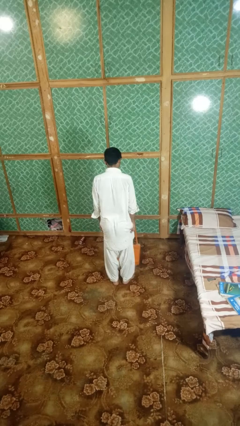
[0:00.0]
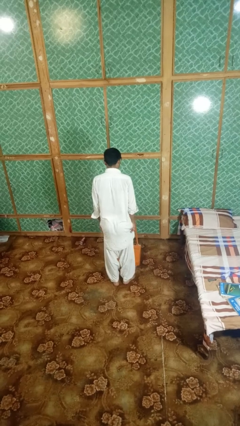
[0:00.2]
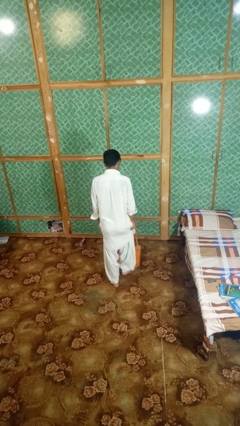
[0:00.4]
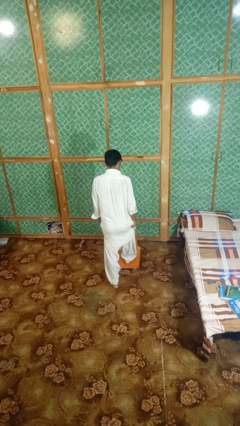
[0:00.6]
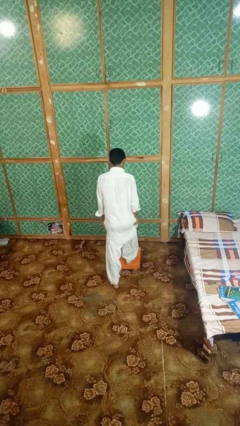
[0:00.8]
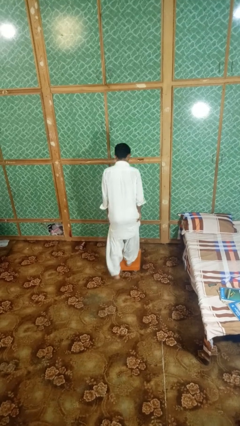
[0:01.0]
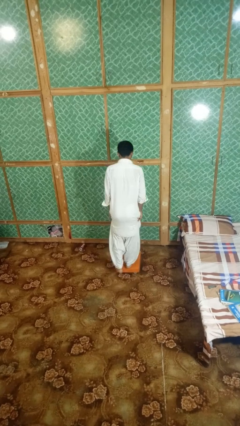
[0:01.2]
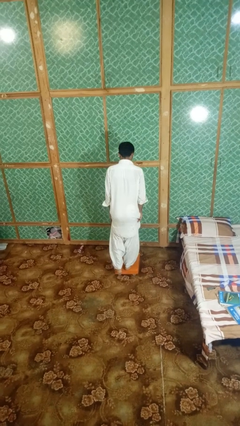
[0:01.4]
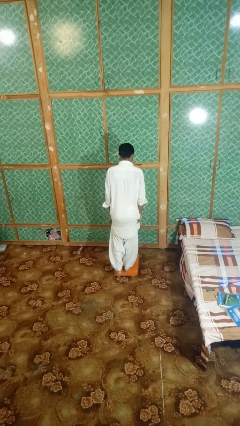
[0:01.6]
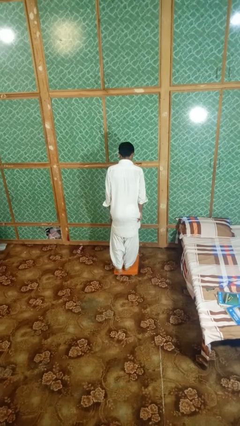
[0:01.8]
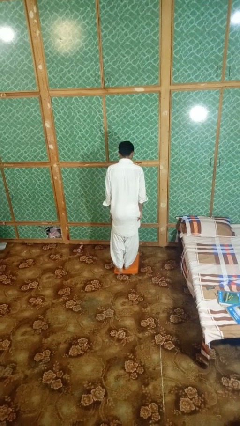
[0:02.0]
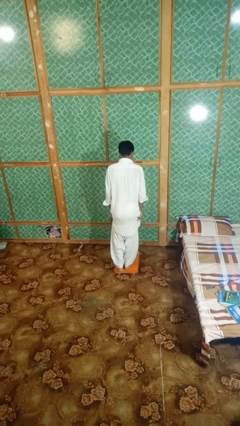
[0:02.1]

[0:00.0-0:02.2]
person uses bodyweight scale

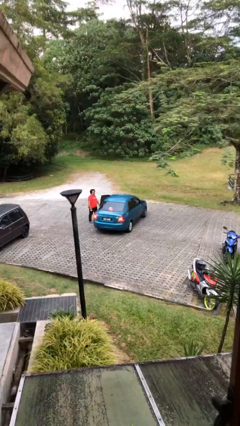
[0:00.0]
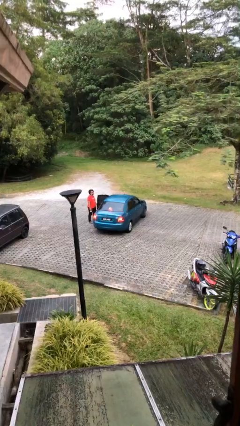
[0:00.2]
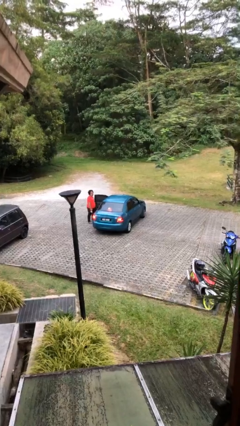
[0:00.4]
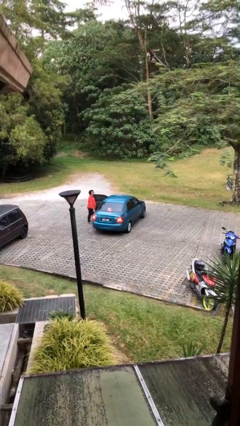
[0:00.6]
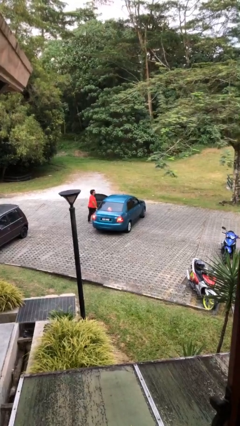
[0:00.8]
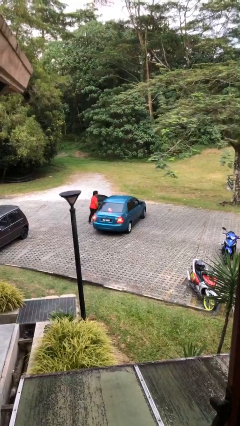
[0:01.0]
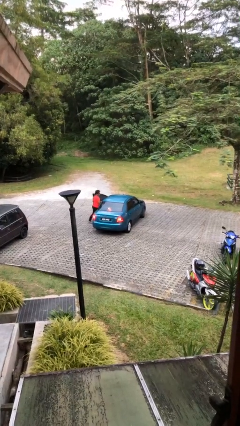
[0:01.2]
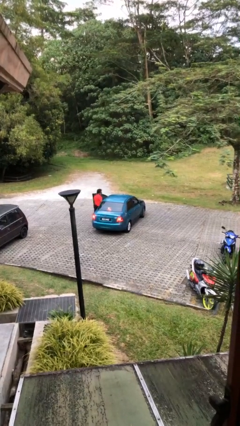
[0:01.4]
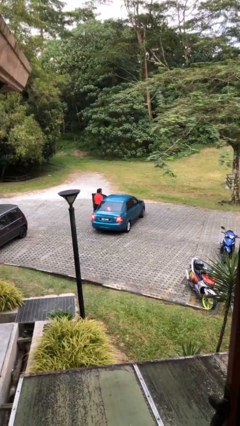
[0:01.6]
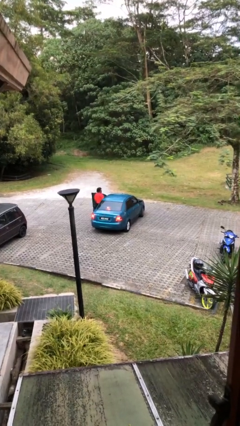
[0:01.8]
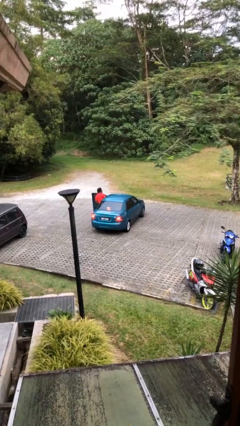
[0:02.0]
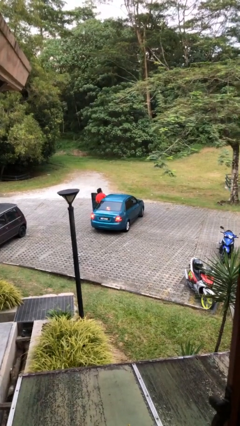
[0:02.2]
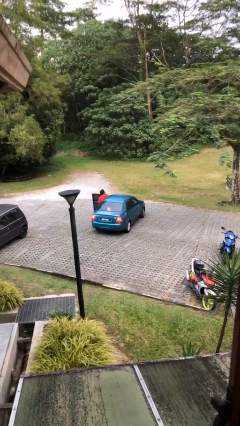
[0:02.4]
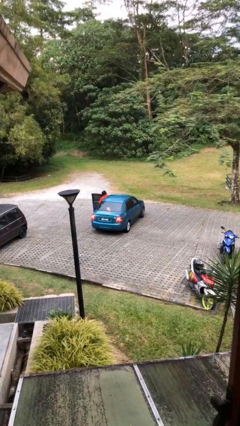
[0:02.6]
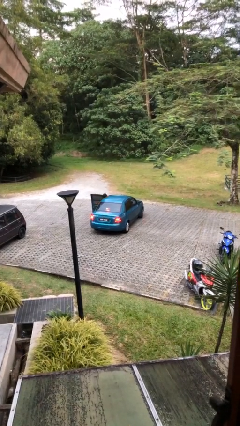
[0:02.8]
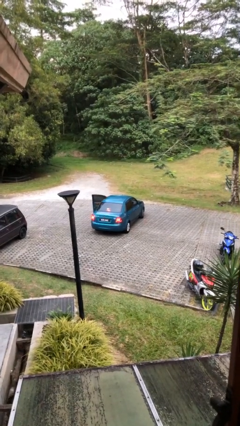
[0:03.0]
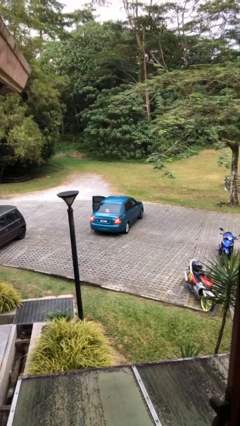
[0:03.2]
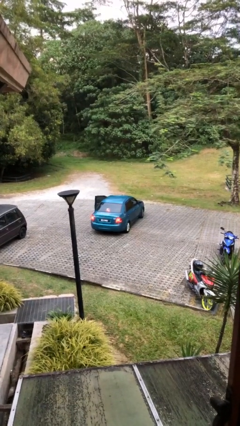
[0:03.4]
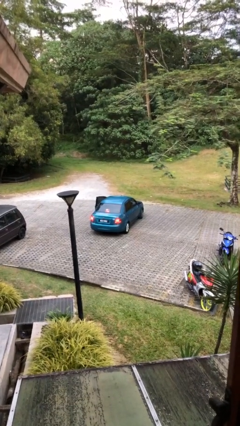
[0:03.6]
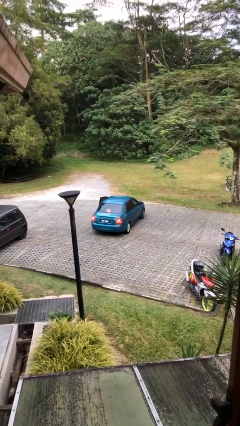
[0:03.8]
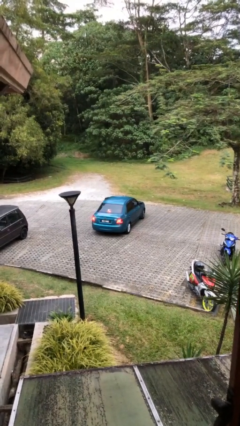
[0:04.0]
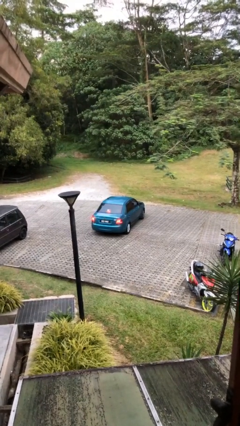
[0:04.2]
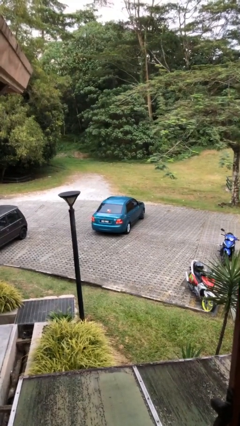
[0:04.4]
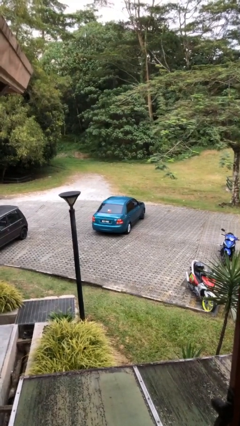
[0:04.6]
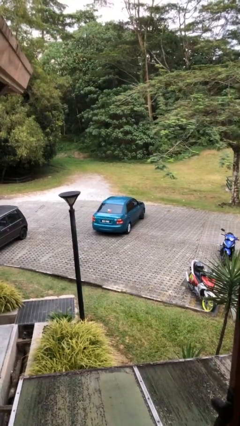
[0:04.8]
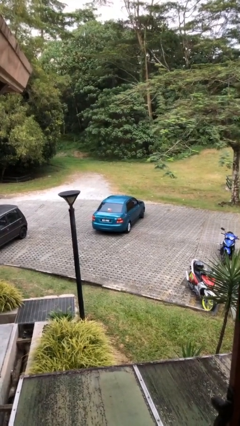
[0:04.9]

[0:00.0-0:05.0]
car picks up person

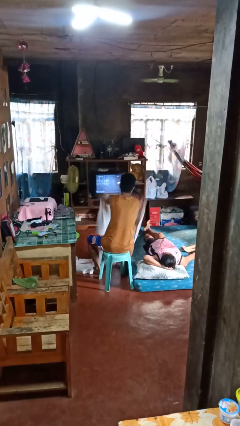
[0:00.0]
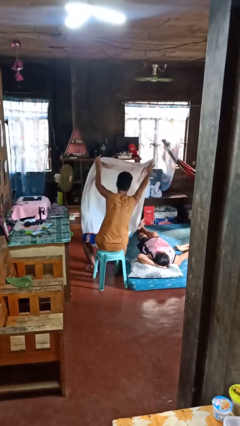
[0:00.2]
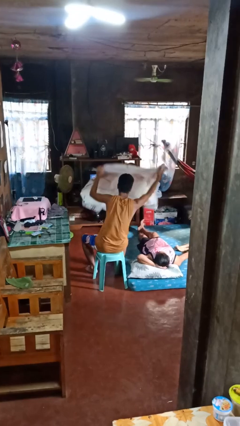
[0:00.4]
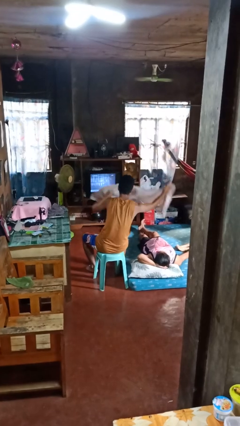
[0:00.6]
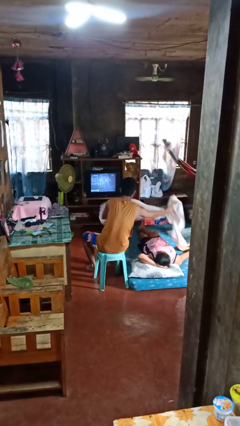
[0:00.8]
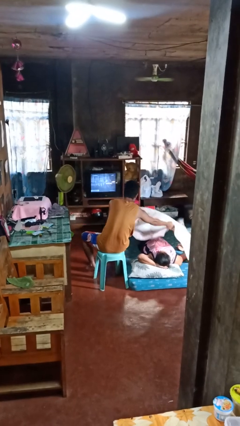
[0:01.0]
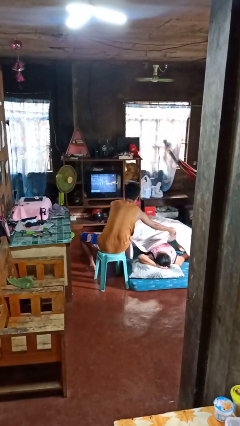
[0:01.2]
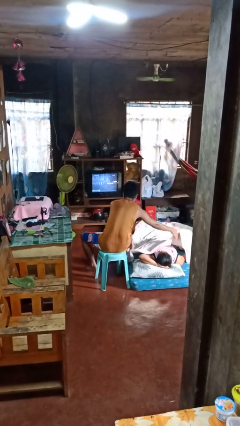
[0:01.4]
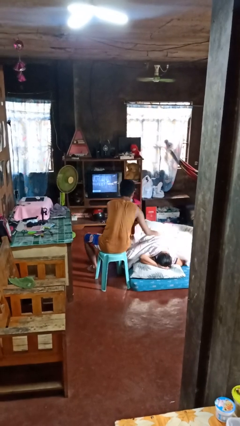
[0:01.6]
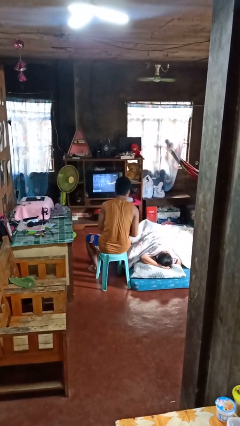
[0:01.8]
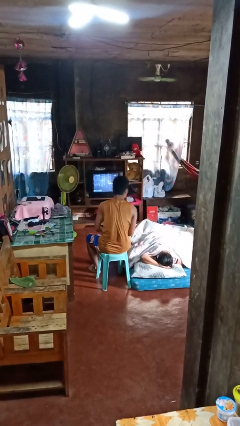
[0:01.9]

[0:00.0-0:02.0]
person covers friend with blanket

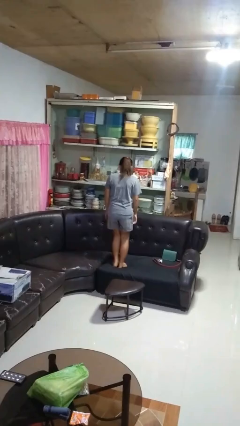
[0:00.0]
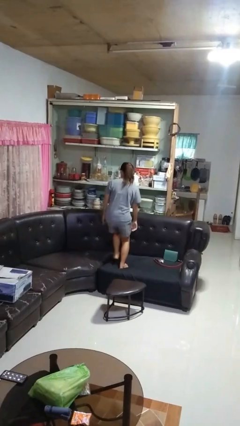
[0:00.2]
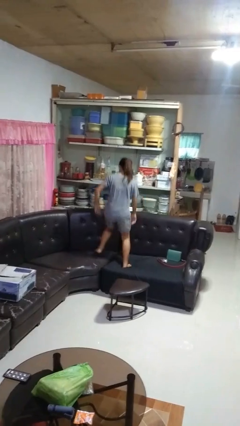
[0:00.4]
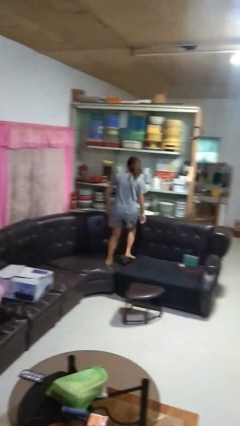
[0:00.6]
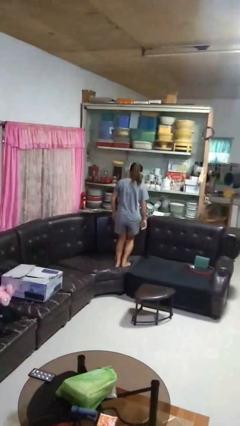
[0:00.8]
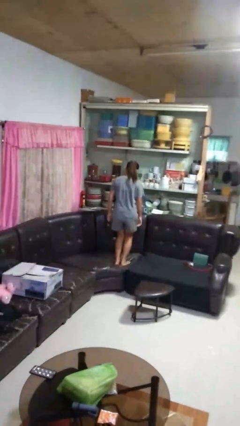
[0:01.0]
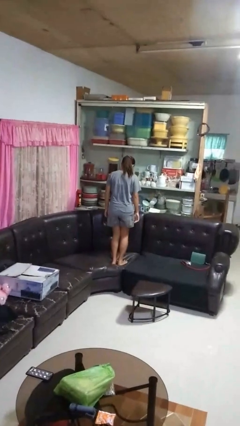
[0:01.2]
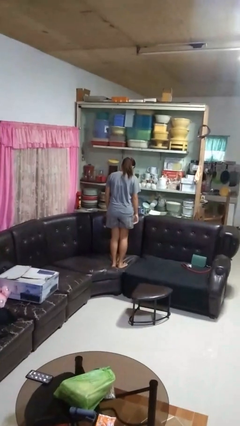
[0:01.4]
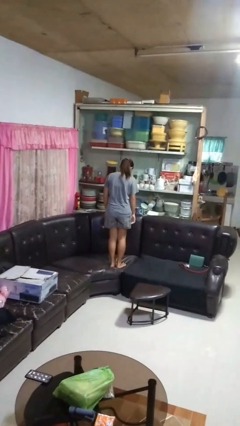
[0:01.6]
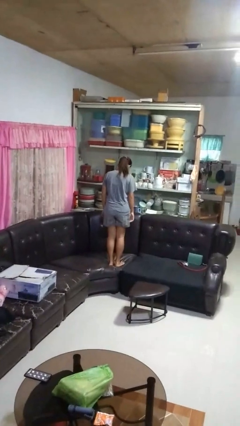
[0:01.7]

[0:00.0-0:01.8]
person jumps on couch

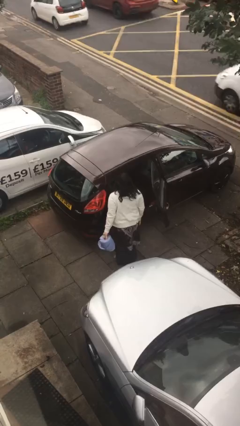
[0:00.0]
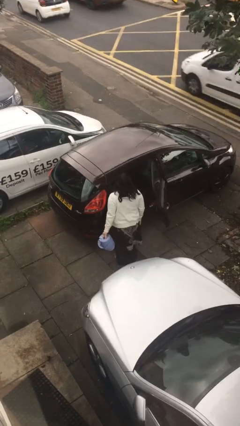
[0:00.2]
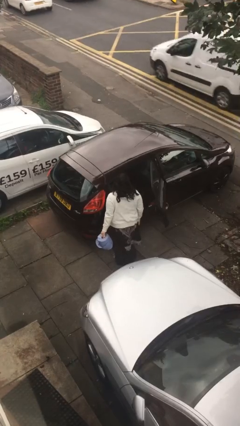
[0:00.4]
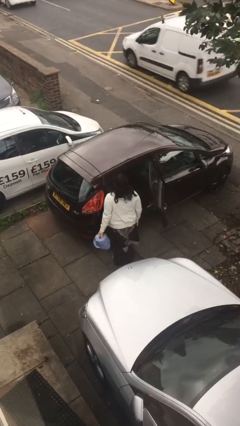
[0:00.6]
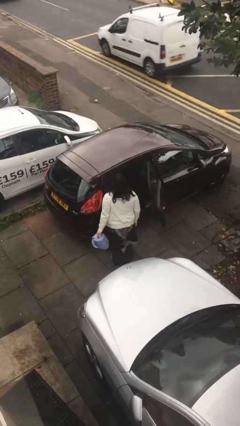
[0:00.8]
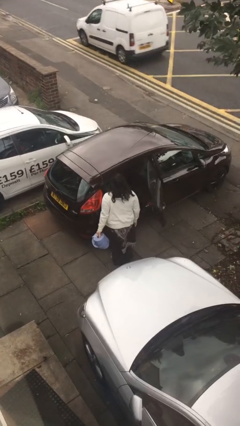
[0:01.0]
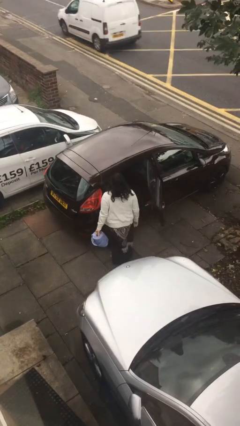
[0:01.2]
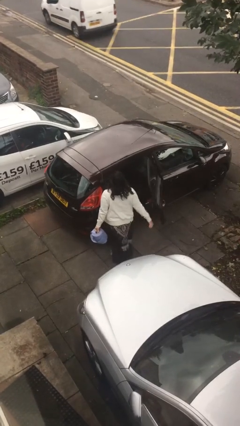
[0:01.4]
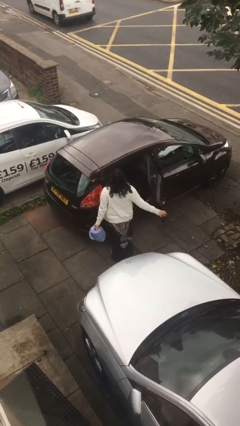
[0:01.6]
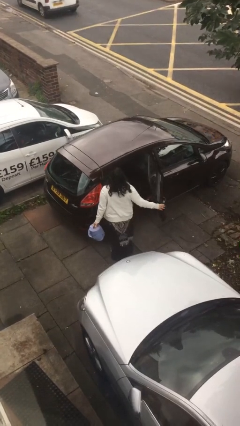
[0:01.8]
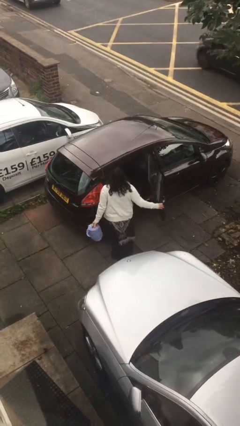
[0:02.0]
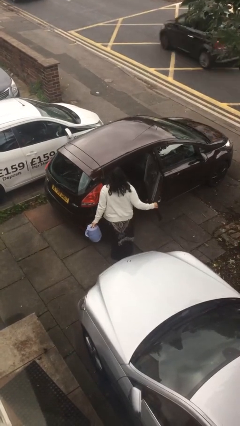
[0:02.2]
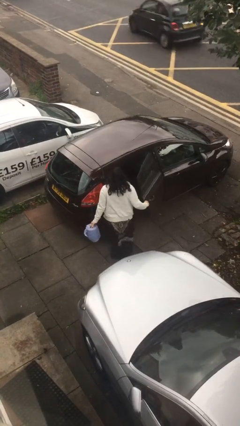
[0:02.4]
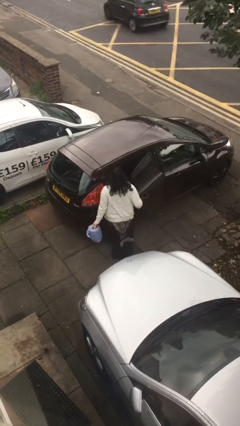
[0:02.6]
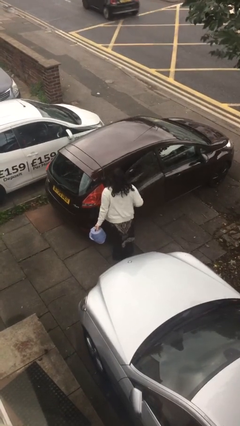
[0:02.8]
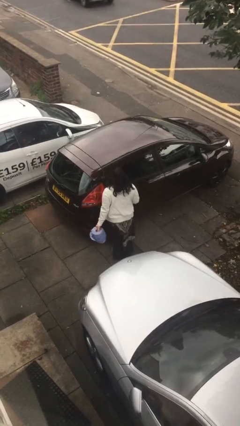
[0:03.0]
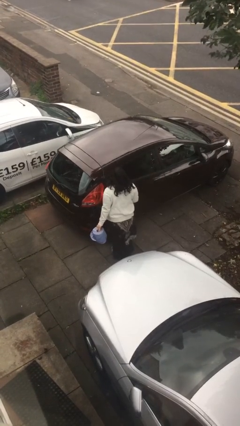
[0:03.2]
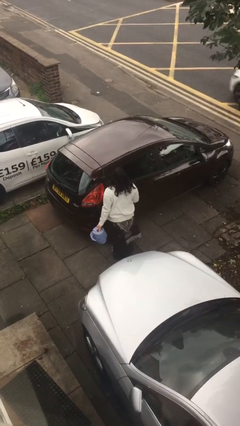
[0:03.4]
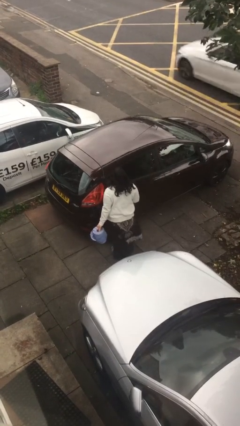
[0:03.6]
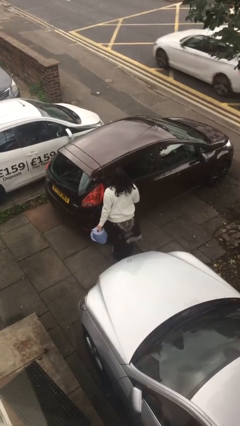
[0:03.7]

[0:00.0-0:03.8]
person closes car door

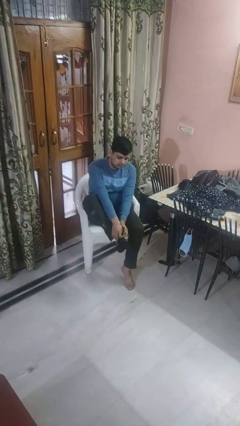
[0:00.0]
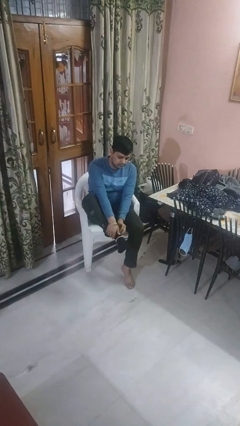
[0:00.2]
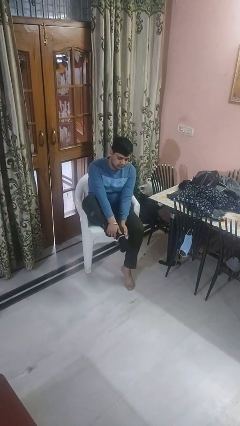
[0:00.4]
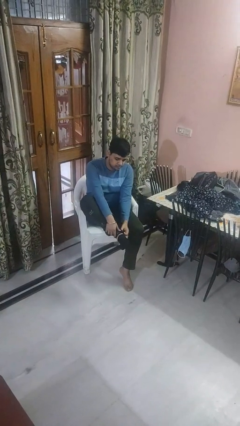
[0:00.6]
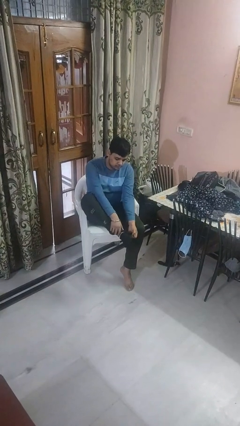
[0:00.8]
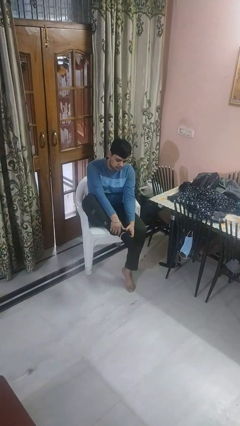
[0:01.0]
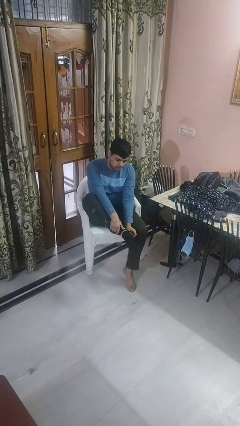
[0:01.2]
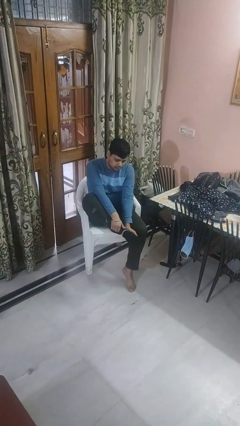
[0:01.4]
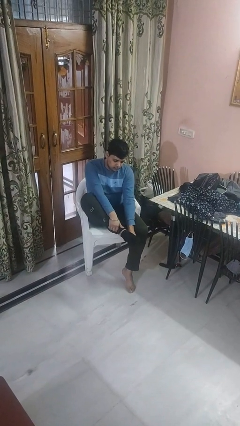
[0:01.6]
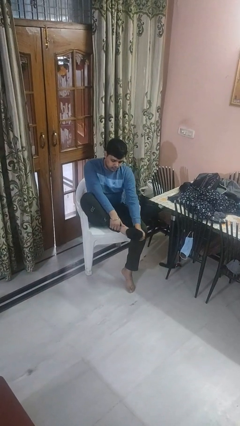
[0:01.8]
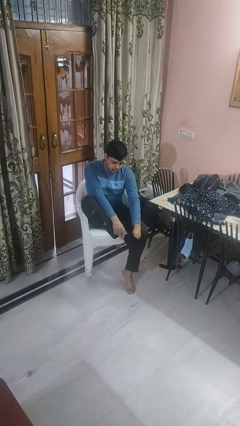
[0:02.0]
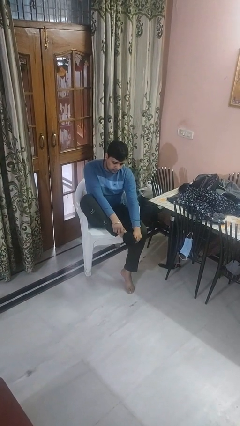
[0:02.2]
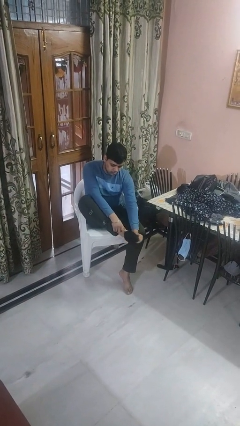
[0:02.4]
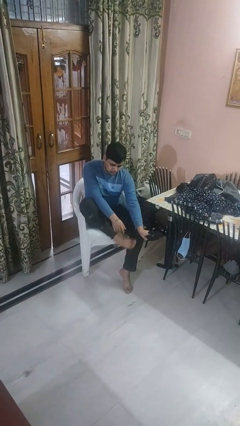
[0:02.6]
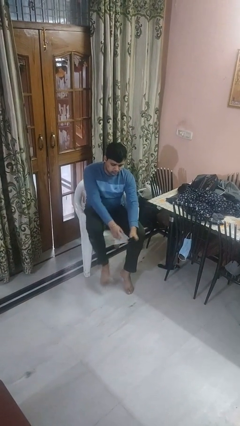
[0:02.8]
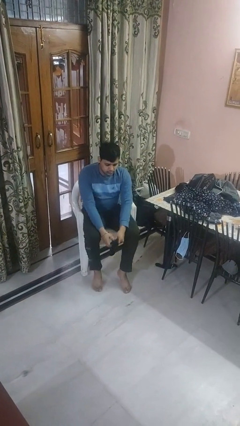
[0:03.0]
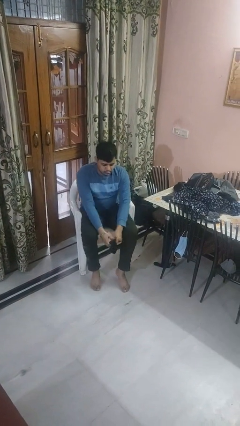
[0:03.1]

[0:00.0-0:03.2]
person takes off socks
